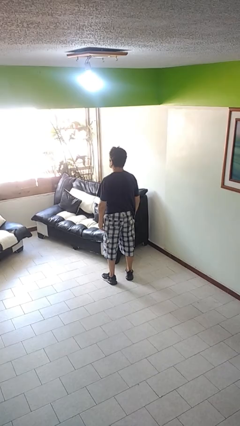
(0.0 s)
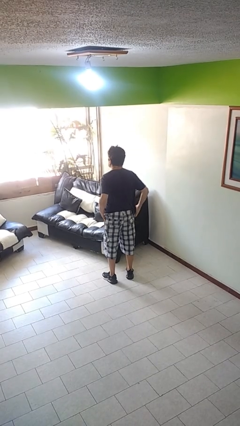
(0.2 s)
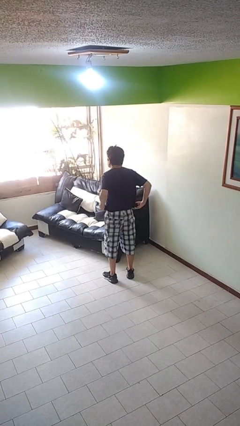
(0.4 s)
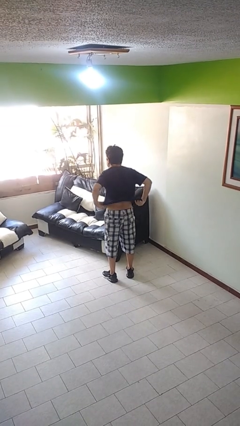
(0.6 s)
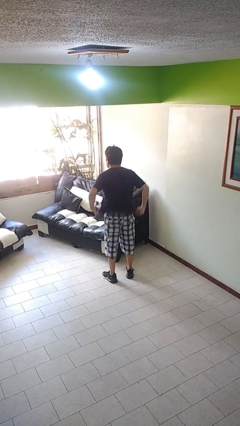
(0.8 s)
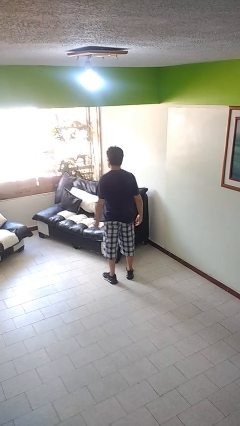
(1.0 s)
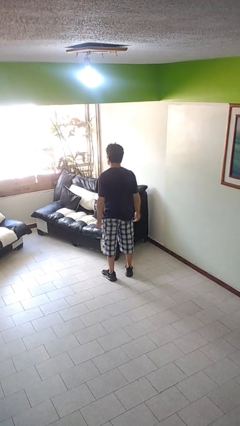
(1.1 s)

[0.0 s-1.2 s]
person untucks shirt

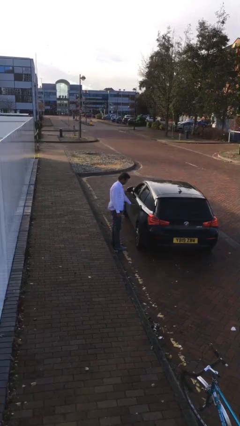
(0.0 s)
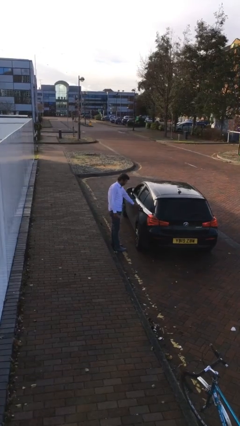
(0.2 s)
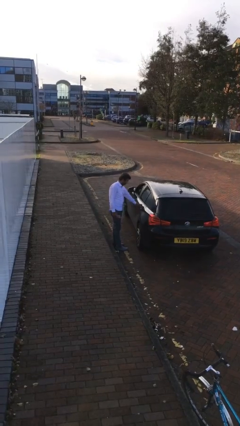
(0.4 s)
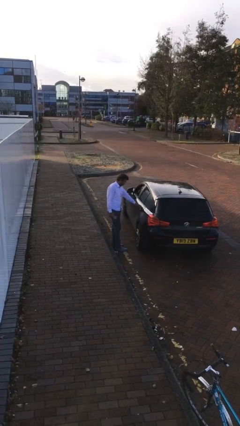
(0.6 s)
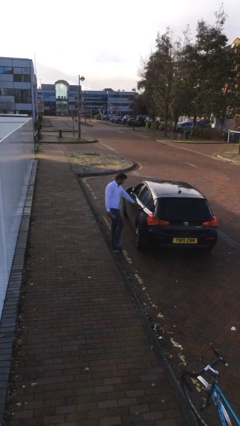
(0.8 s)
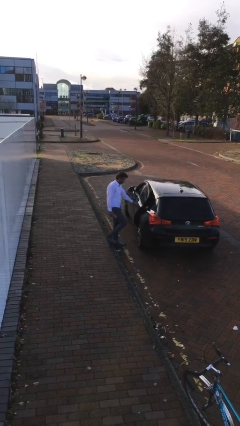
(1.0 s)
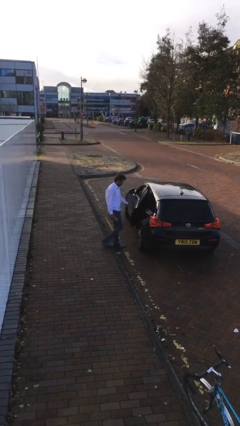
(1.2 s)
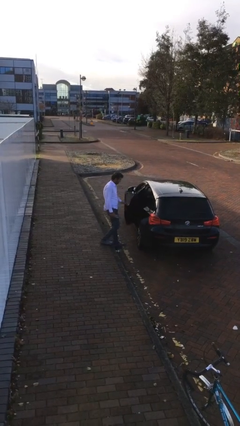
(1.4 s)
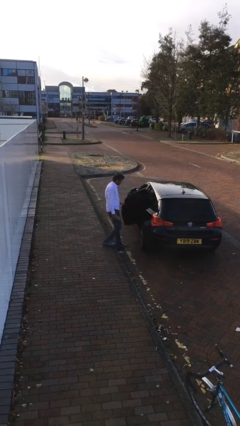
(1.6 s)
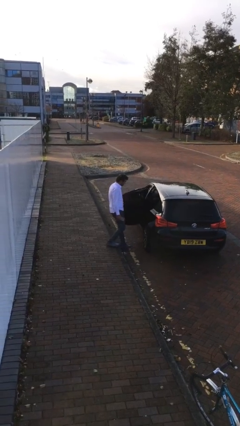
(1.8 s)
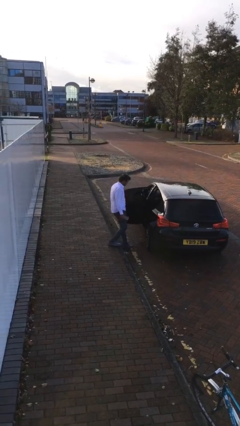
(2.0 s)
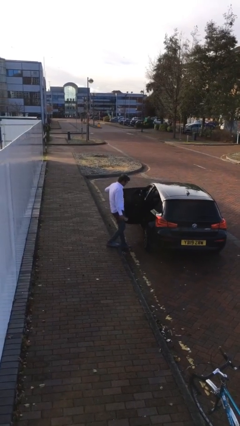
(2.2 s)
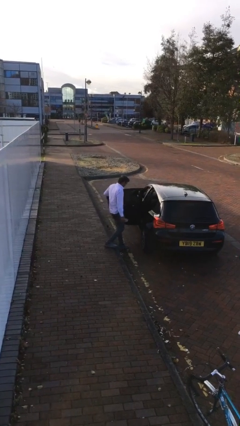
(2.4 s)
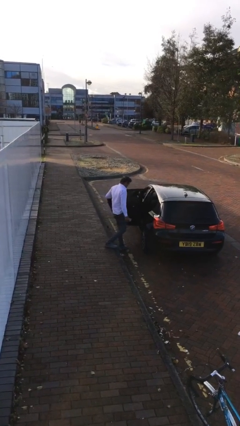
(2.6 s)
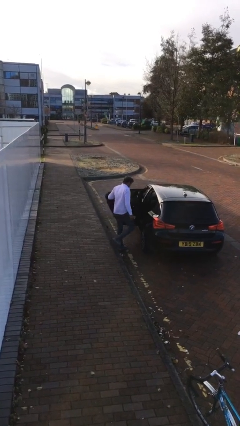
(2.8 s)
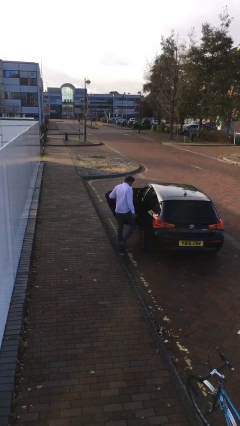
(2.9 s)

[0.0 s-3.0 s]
person opens car door

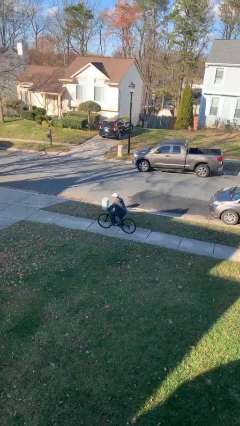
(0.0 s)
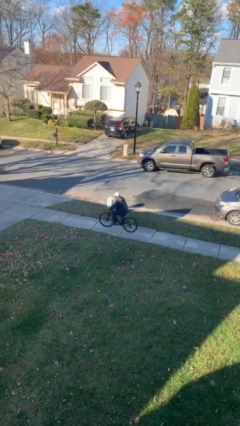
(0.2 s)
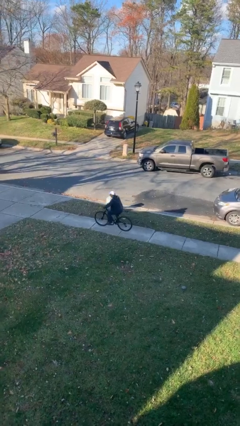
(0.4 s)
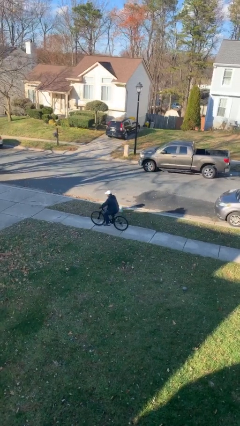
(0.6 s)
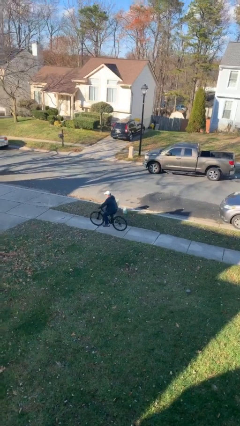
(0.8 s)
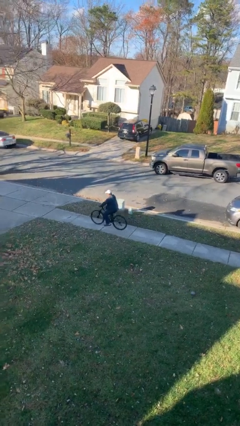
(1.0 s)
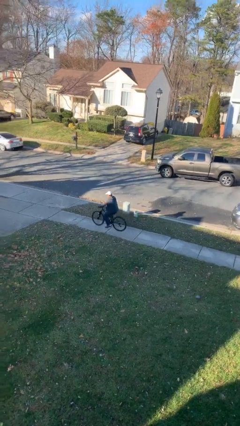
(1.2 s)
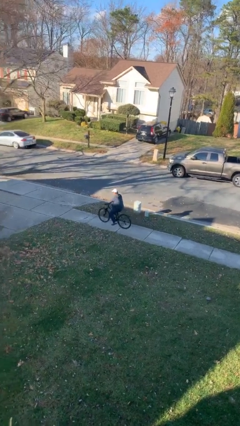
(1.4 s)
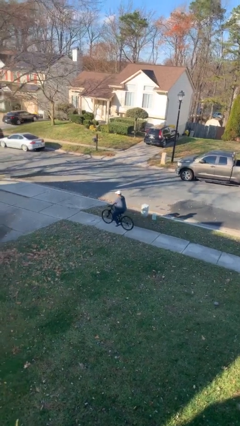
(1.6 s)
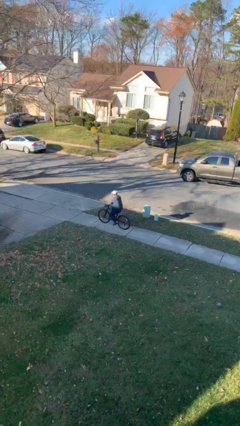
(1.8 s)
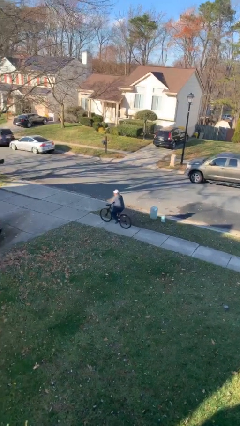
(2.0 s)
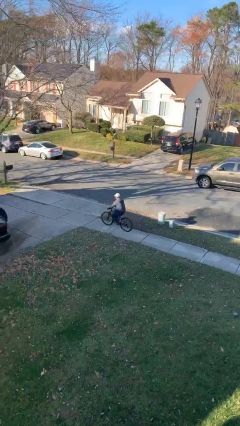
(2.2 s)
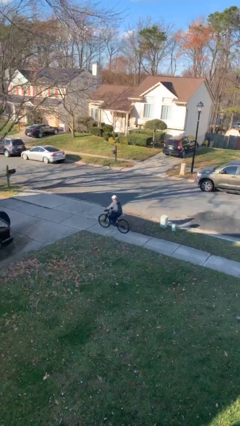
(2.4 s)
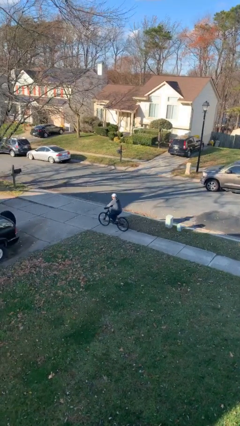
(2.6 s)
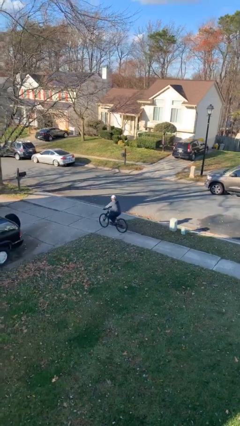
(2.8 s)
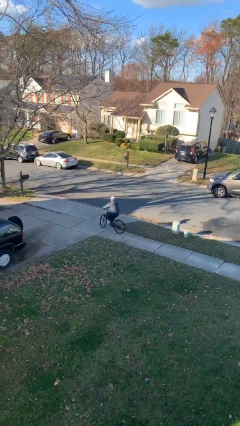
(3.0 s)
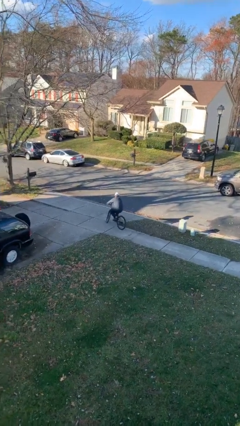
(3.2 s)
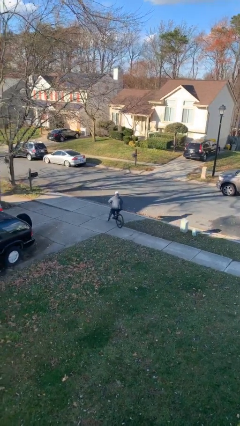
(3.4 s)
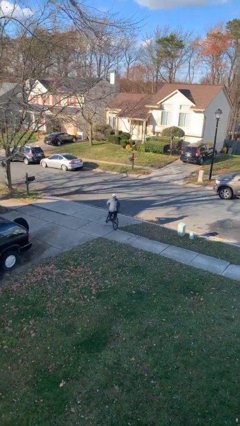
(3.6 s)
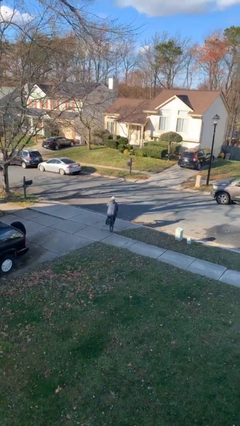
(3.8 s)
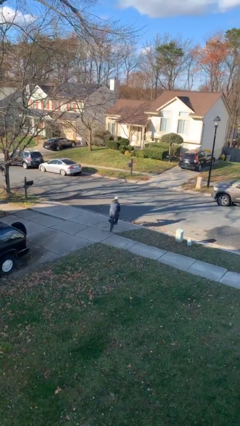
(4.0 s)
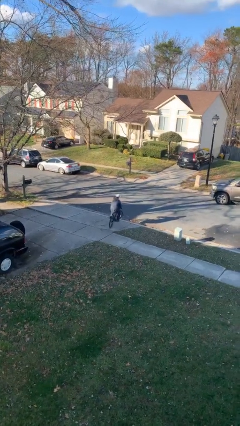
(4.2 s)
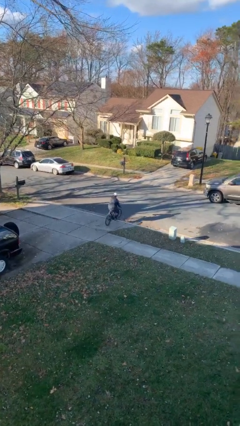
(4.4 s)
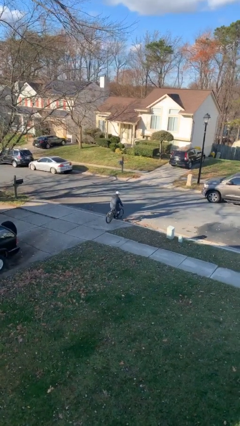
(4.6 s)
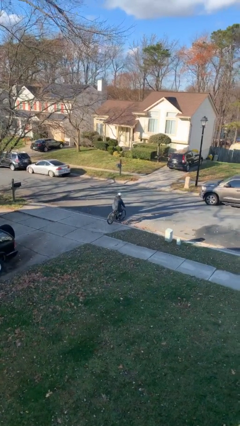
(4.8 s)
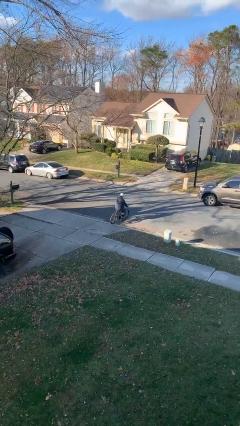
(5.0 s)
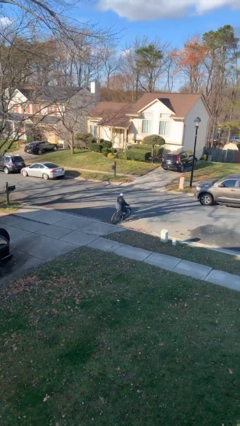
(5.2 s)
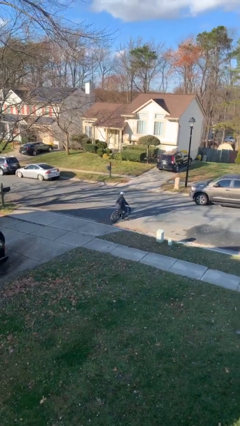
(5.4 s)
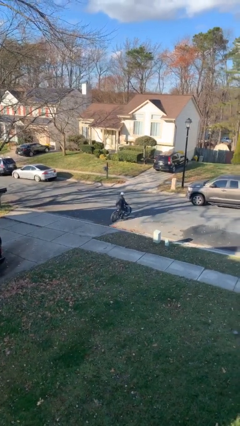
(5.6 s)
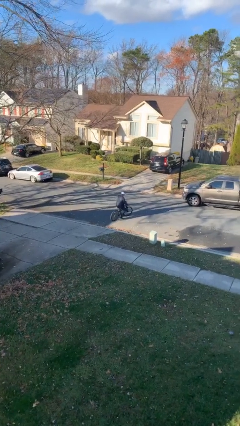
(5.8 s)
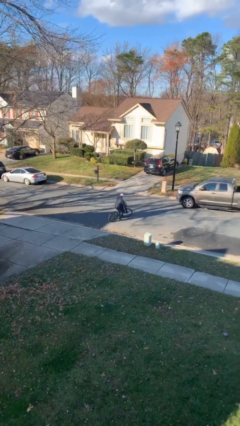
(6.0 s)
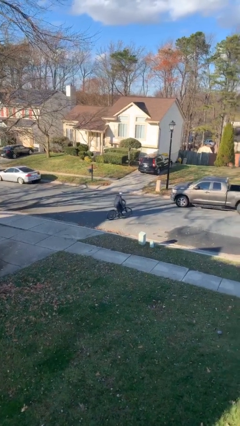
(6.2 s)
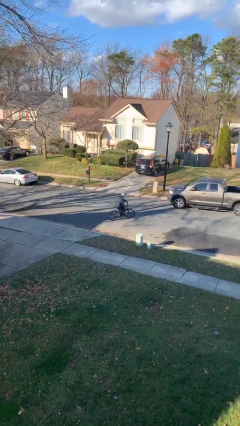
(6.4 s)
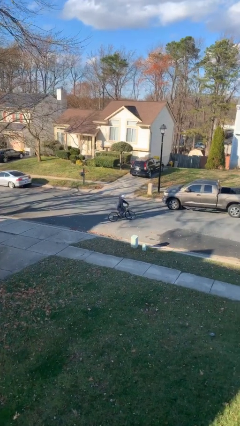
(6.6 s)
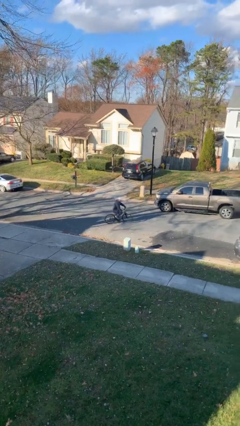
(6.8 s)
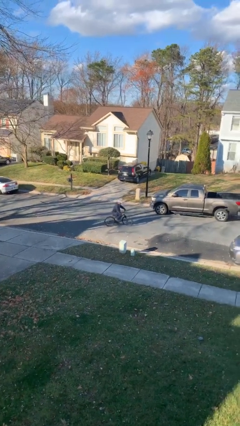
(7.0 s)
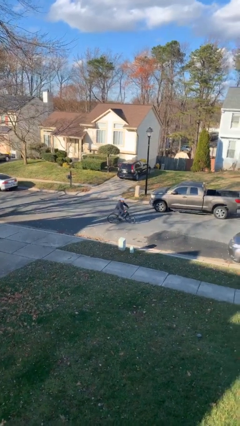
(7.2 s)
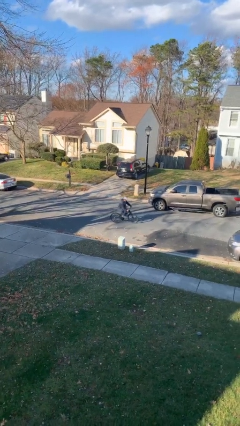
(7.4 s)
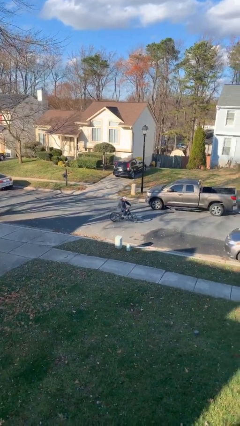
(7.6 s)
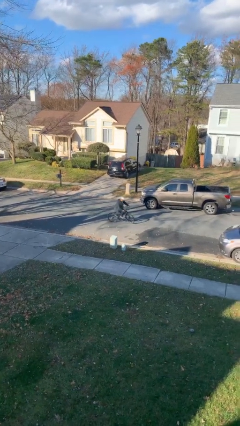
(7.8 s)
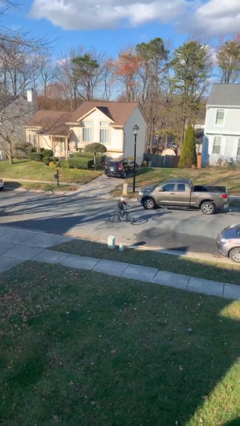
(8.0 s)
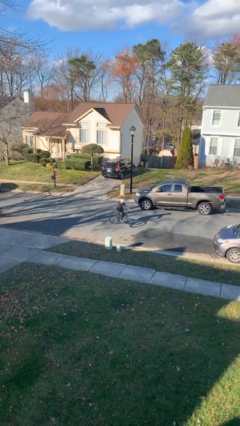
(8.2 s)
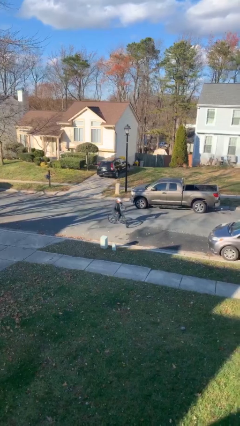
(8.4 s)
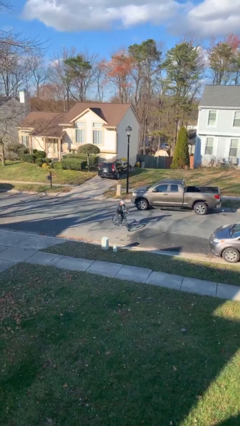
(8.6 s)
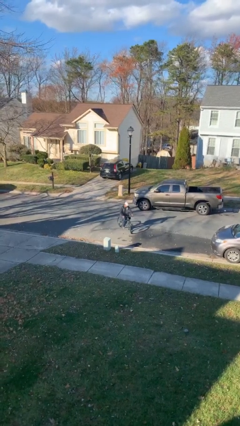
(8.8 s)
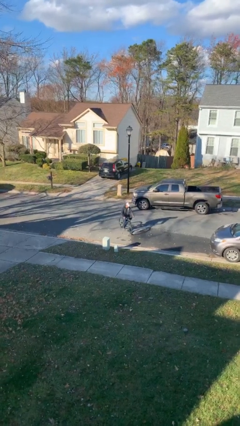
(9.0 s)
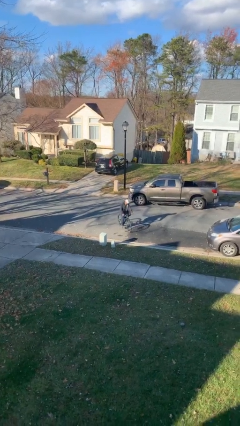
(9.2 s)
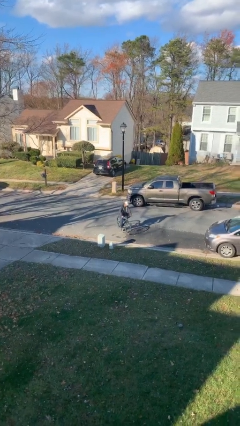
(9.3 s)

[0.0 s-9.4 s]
person rides bicycle

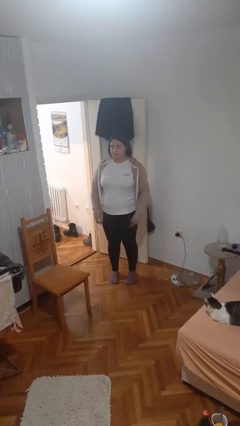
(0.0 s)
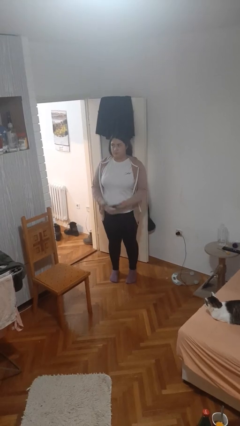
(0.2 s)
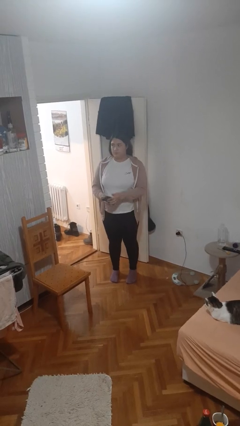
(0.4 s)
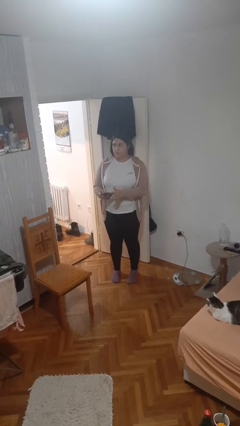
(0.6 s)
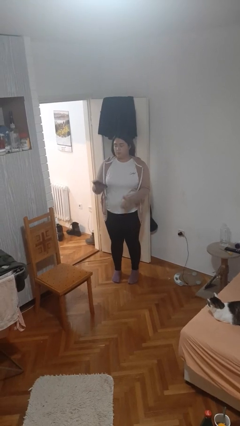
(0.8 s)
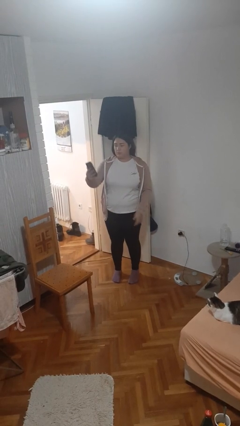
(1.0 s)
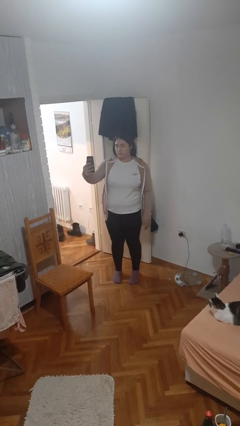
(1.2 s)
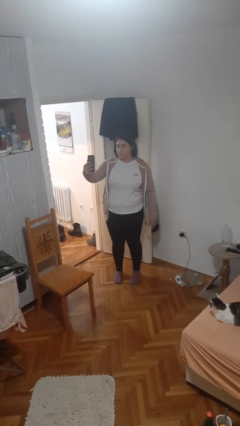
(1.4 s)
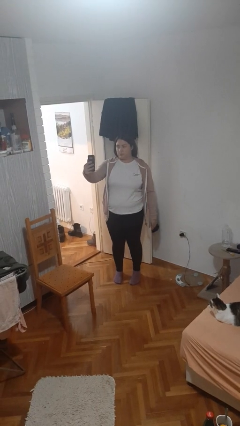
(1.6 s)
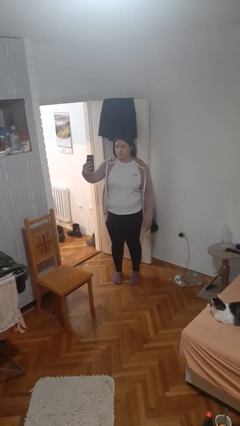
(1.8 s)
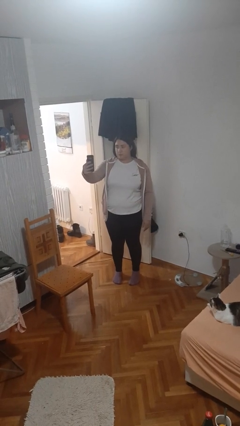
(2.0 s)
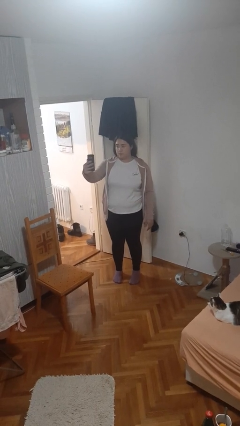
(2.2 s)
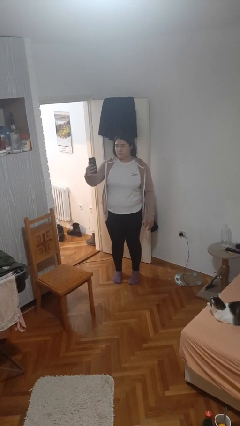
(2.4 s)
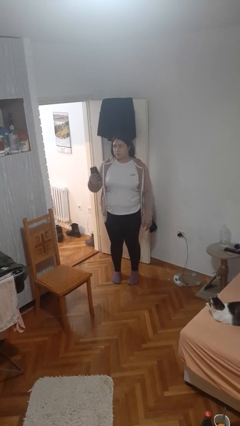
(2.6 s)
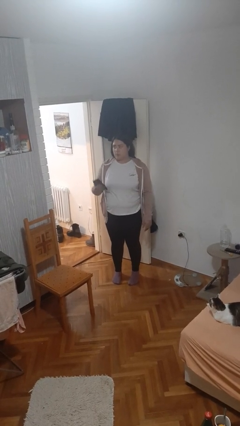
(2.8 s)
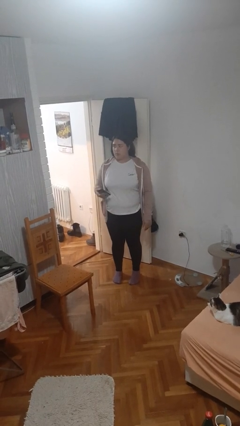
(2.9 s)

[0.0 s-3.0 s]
person takes selfie

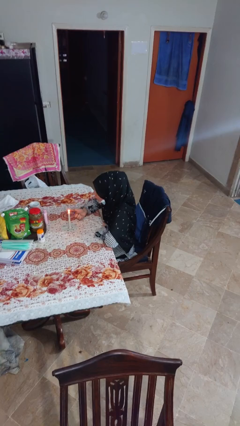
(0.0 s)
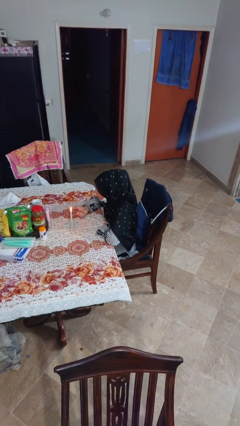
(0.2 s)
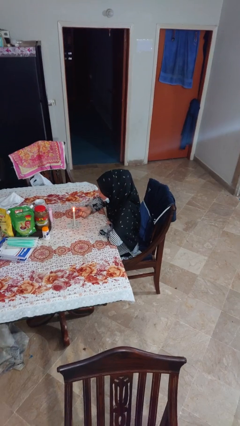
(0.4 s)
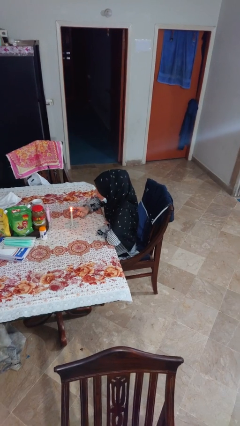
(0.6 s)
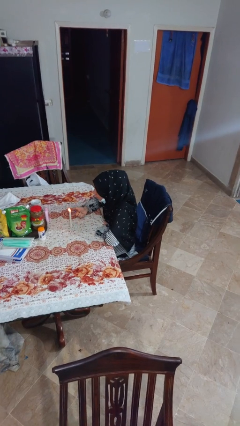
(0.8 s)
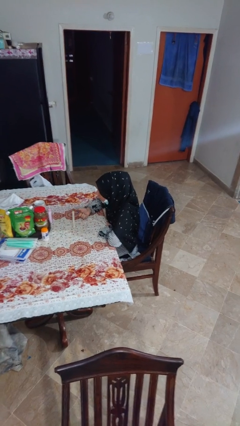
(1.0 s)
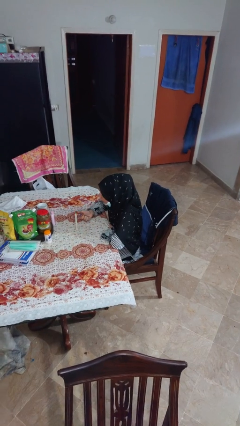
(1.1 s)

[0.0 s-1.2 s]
person extinguishes candle
